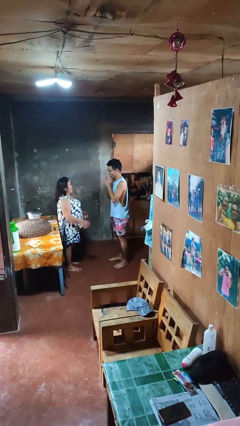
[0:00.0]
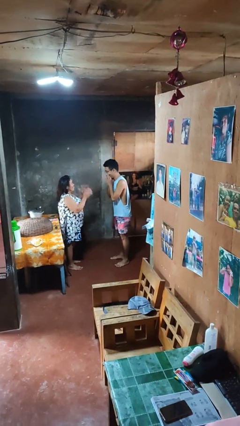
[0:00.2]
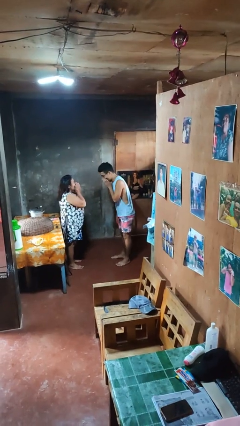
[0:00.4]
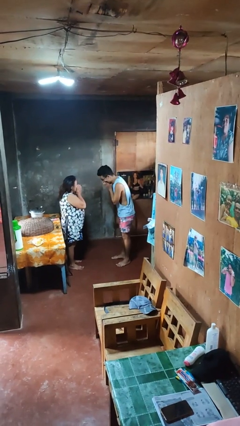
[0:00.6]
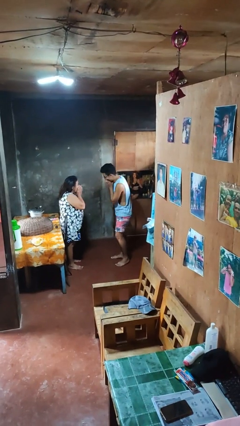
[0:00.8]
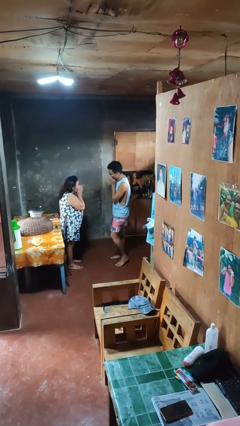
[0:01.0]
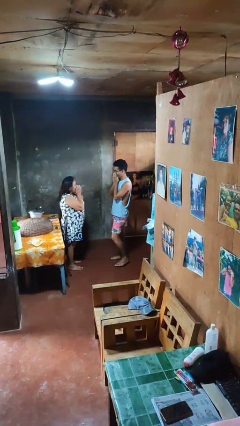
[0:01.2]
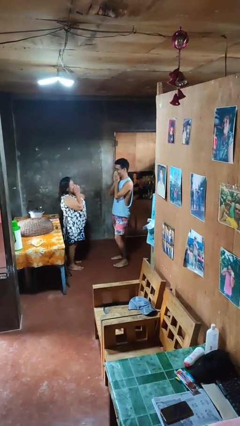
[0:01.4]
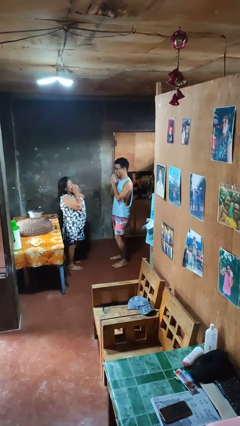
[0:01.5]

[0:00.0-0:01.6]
person laughs with person

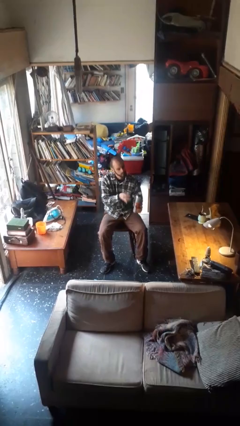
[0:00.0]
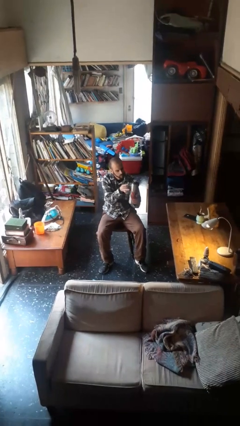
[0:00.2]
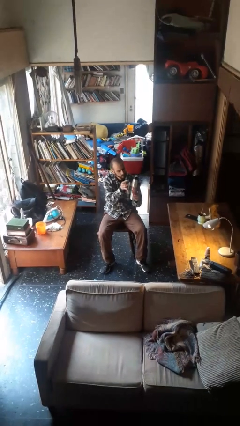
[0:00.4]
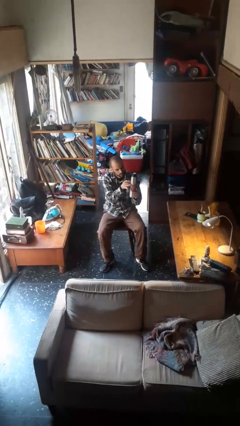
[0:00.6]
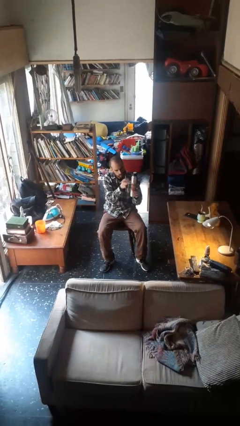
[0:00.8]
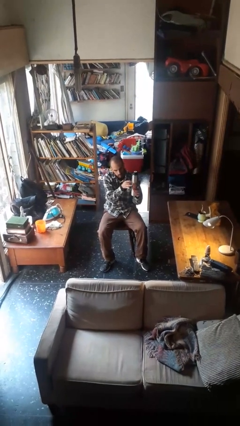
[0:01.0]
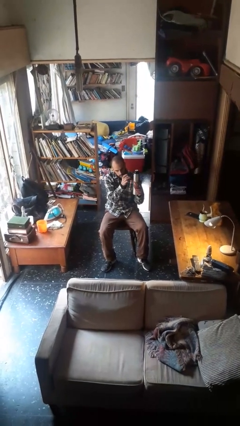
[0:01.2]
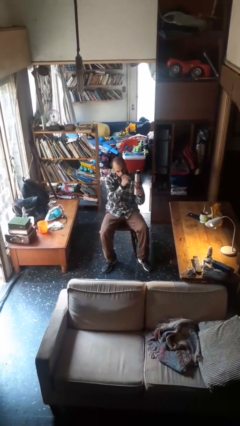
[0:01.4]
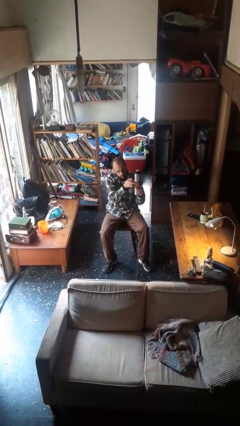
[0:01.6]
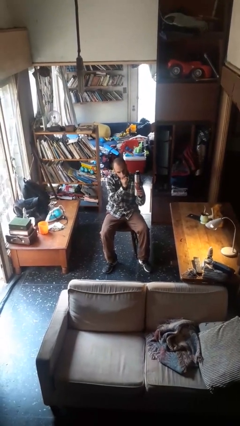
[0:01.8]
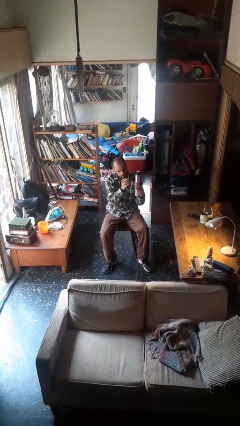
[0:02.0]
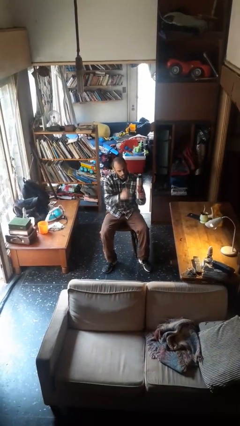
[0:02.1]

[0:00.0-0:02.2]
person taps object with finger

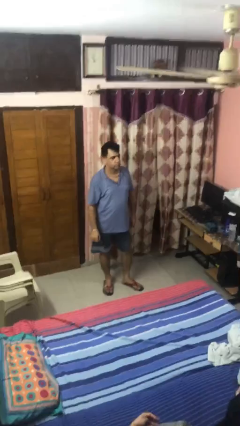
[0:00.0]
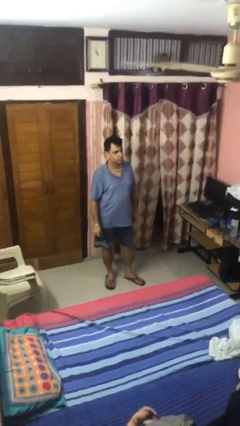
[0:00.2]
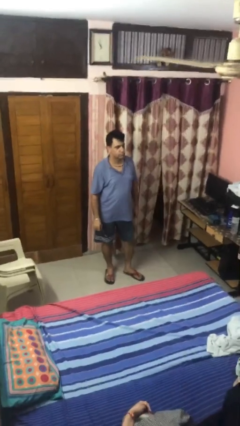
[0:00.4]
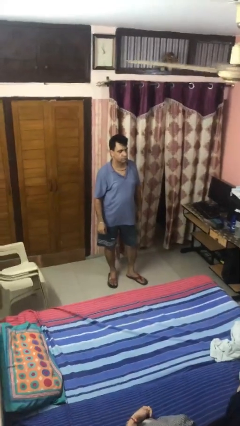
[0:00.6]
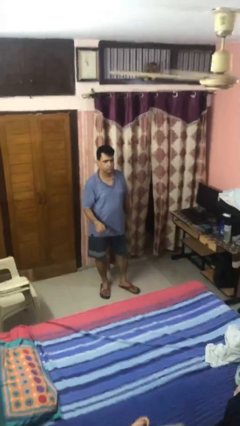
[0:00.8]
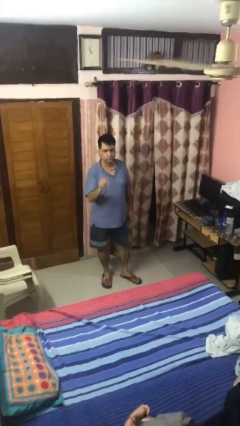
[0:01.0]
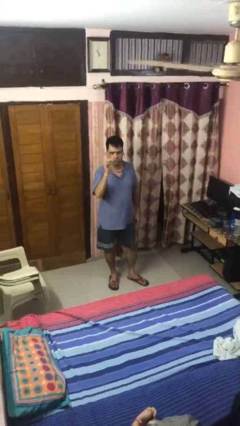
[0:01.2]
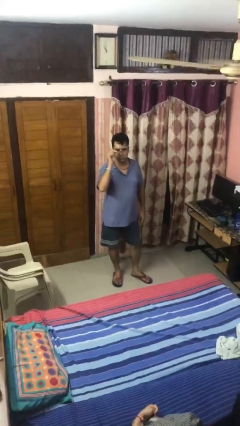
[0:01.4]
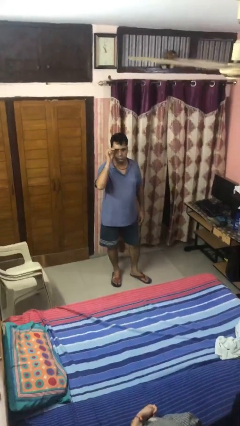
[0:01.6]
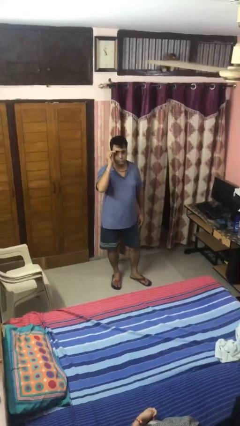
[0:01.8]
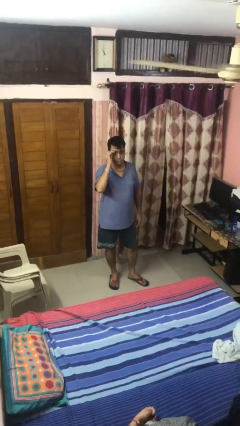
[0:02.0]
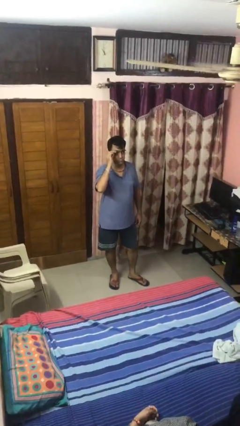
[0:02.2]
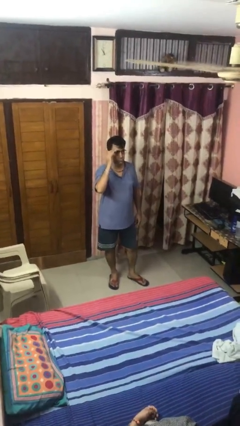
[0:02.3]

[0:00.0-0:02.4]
person puts on glasses

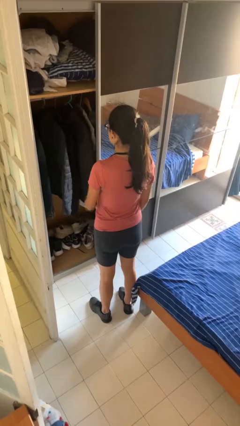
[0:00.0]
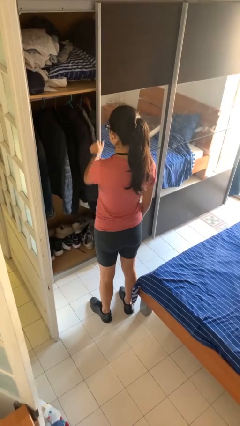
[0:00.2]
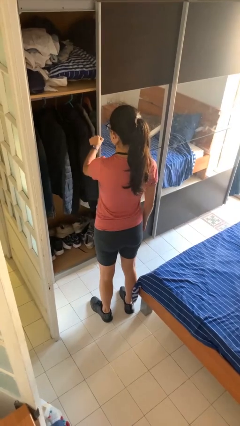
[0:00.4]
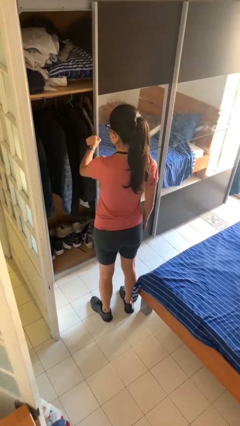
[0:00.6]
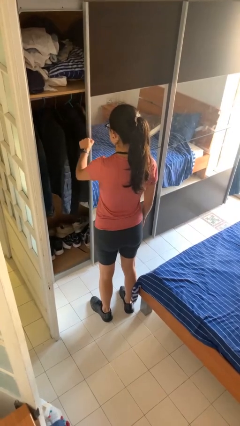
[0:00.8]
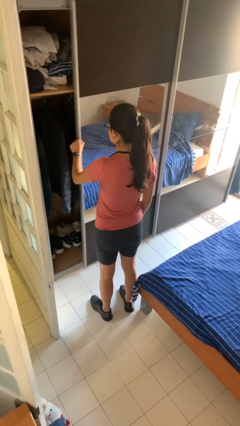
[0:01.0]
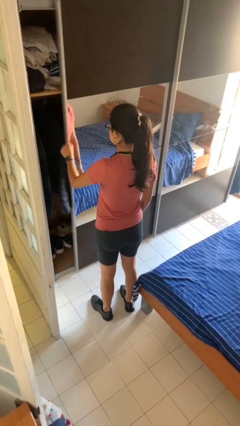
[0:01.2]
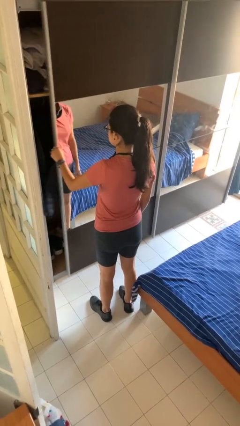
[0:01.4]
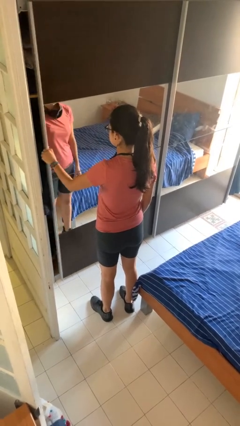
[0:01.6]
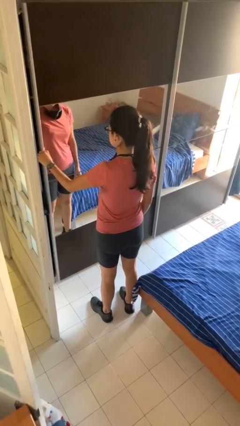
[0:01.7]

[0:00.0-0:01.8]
person closes dresser drawer

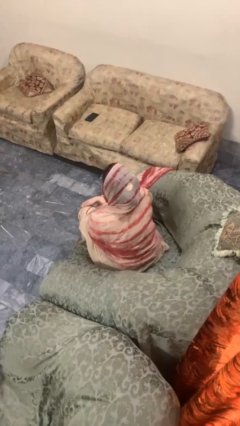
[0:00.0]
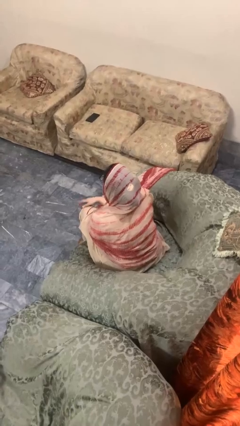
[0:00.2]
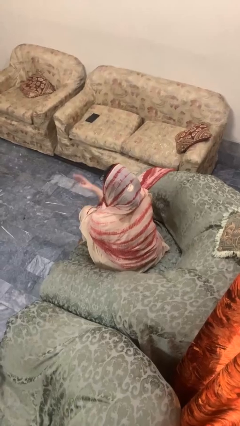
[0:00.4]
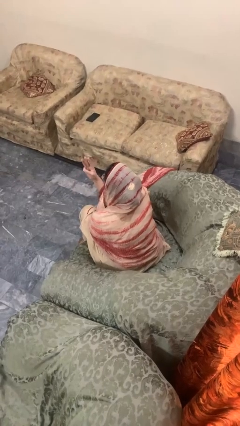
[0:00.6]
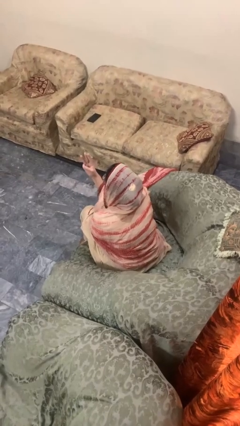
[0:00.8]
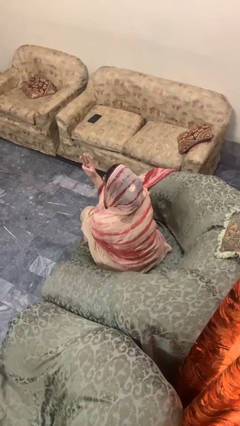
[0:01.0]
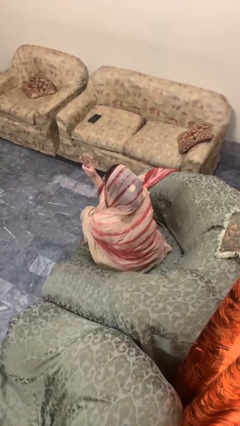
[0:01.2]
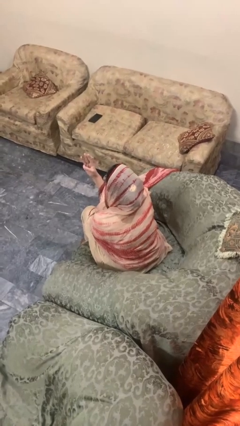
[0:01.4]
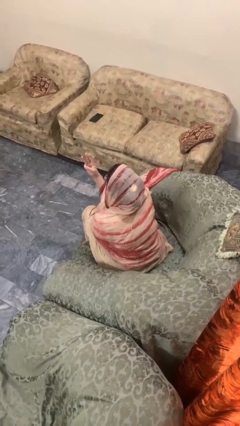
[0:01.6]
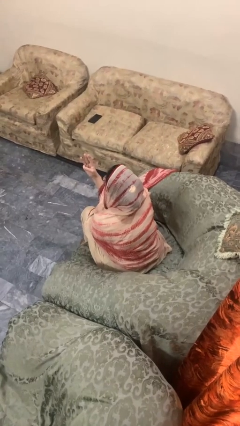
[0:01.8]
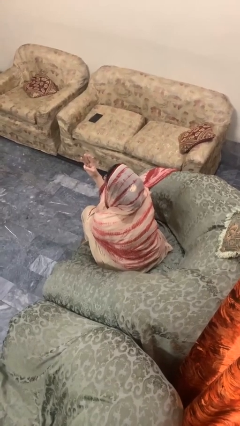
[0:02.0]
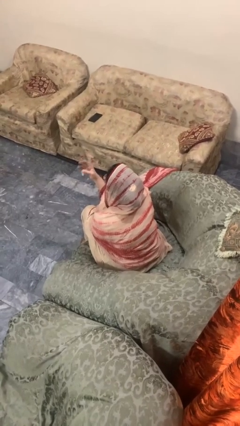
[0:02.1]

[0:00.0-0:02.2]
person gestures number three

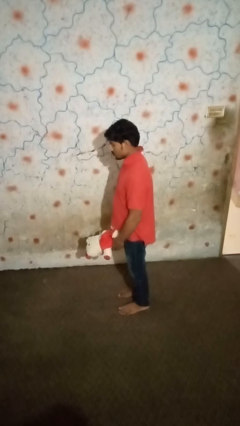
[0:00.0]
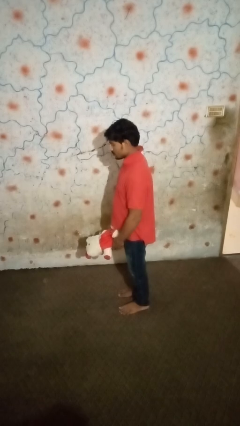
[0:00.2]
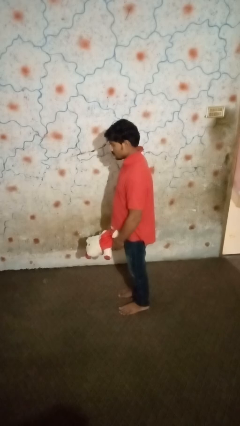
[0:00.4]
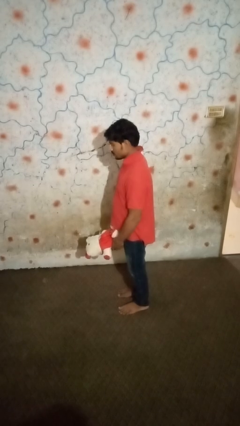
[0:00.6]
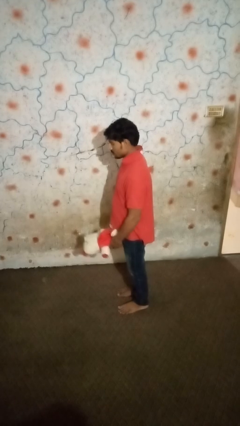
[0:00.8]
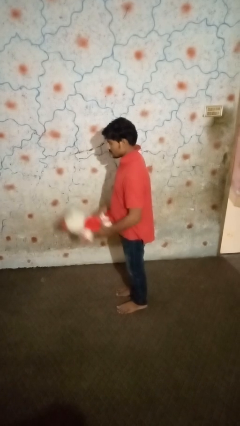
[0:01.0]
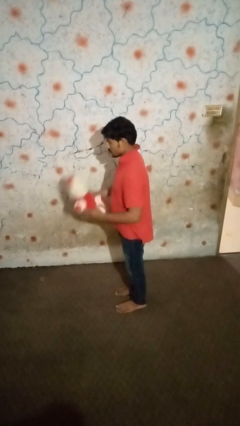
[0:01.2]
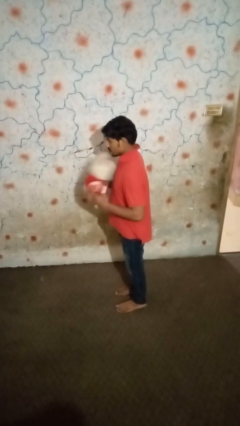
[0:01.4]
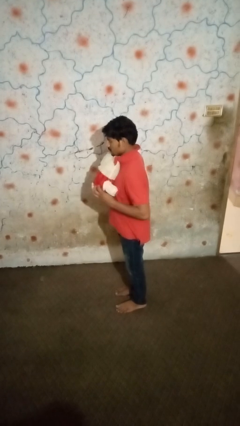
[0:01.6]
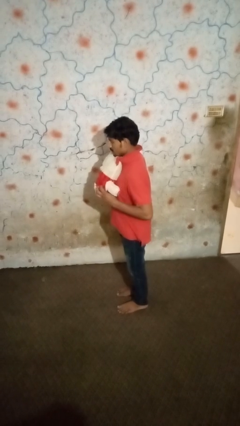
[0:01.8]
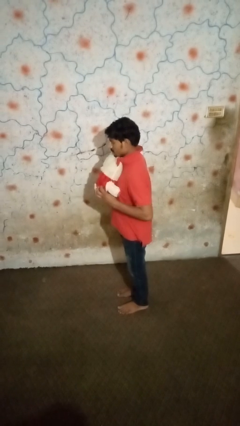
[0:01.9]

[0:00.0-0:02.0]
person hugs stuffed animal

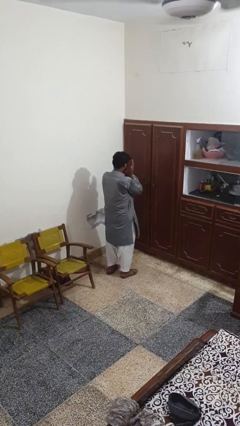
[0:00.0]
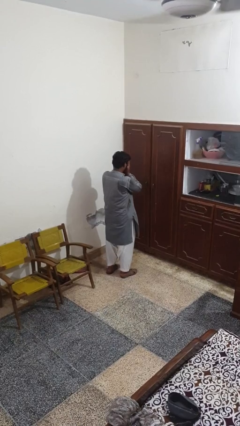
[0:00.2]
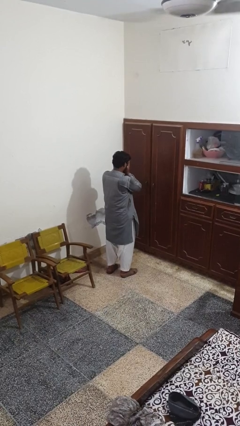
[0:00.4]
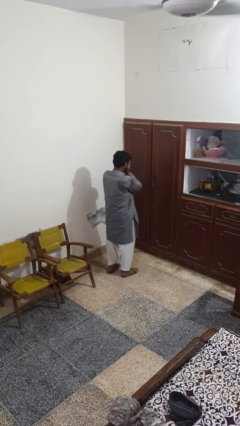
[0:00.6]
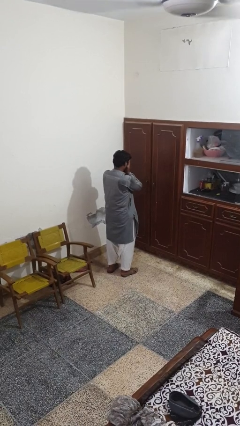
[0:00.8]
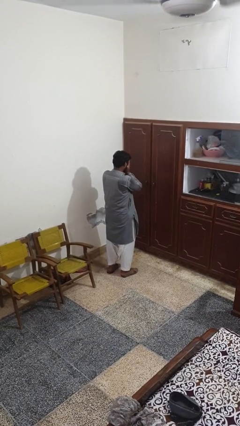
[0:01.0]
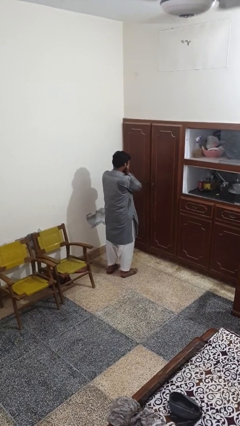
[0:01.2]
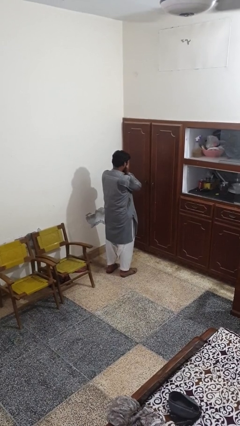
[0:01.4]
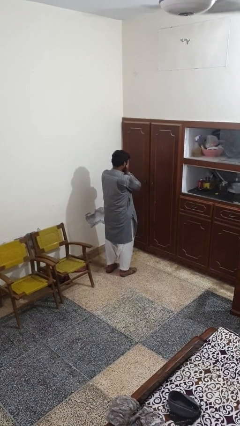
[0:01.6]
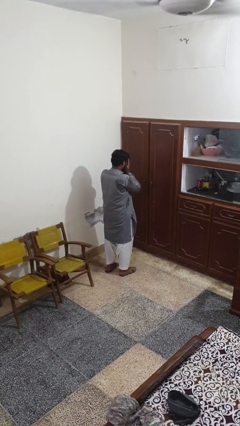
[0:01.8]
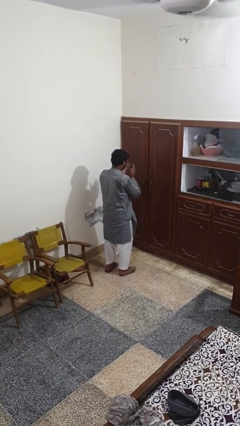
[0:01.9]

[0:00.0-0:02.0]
person covers face with hands

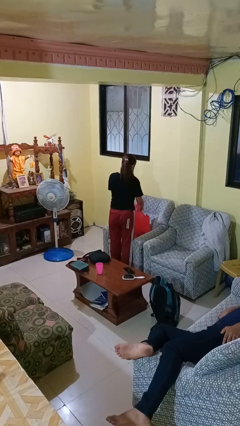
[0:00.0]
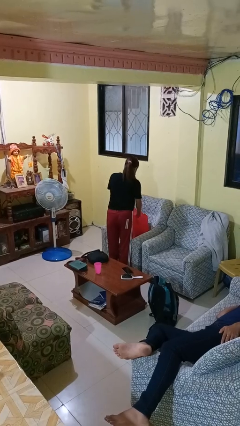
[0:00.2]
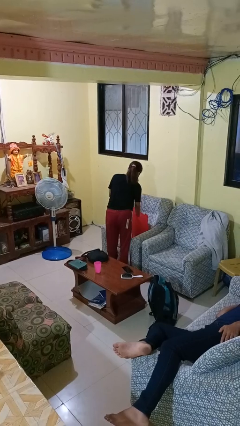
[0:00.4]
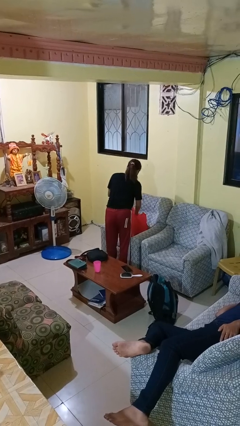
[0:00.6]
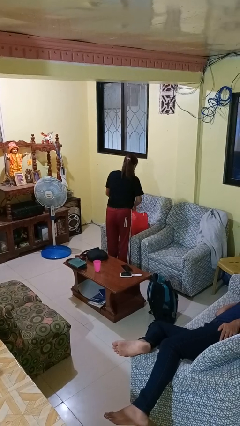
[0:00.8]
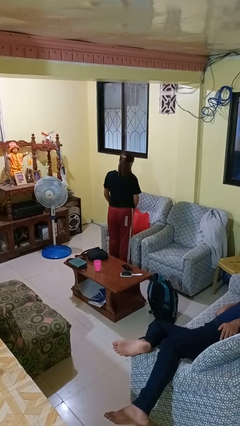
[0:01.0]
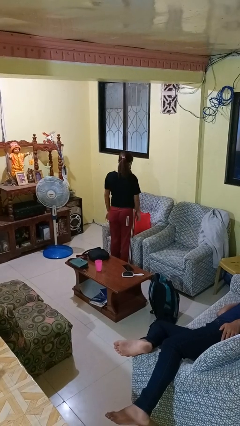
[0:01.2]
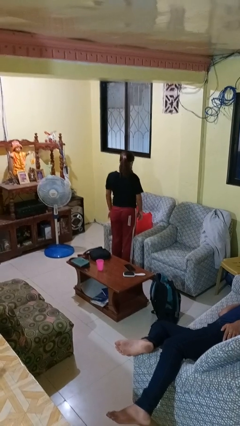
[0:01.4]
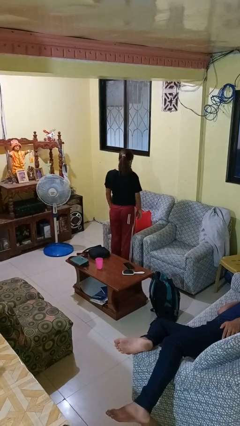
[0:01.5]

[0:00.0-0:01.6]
person puts object into bag

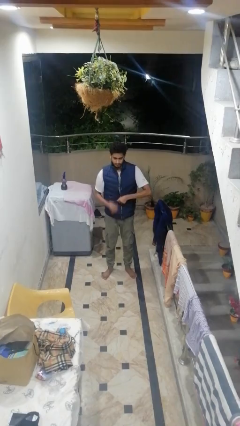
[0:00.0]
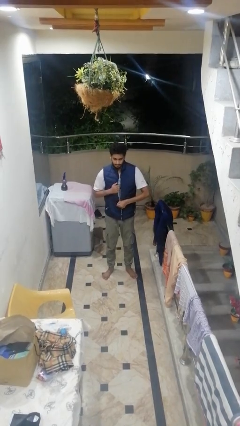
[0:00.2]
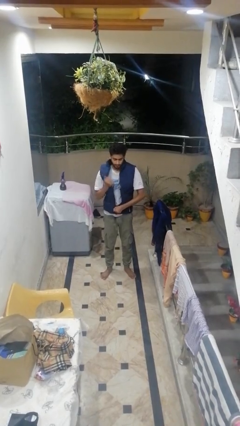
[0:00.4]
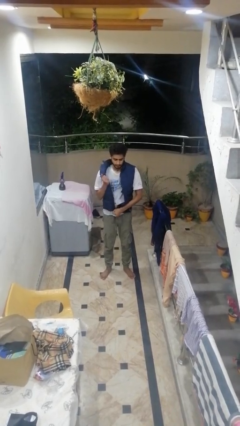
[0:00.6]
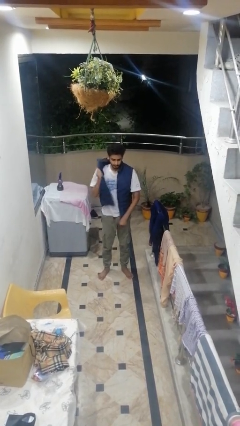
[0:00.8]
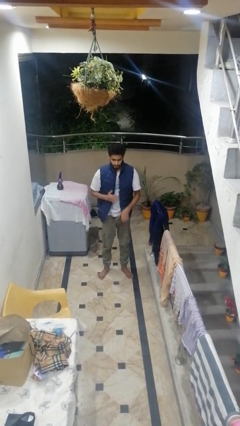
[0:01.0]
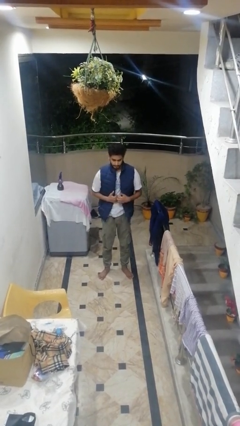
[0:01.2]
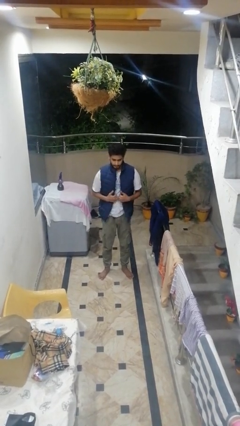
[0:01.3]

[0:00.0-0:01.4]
person unzips jacket
